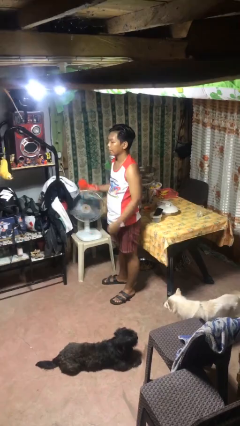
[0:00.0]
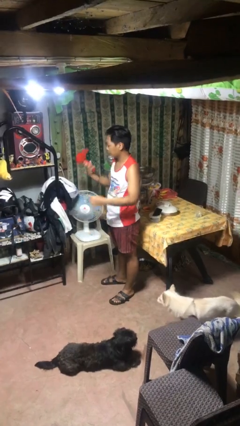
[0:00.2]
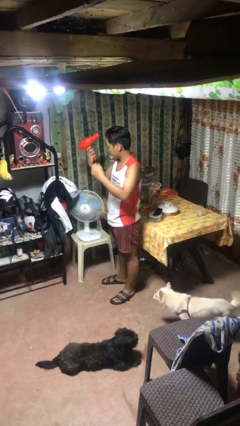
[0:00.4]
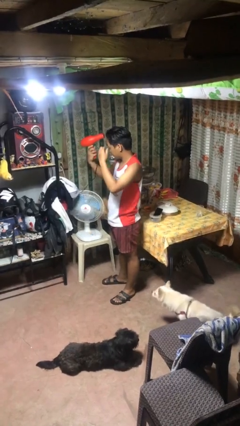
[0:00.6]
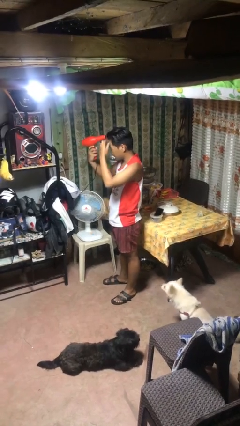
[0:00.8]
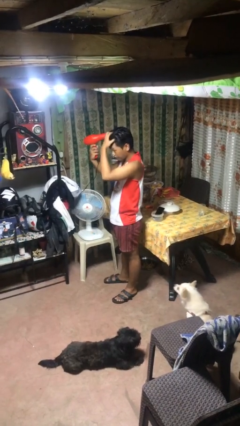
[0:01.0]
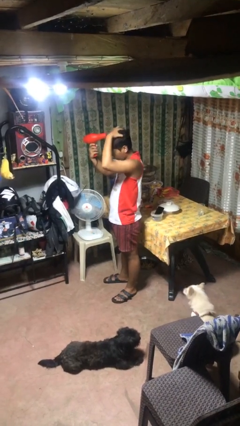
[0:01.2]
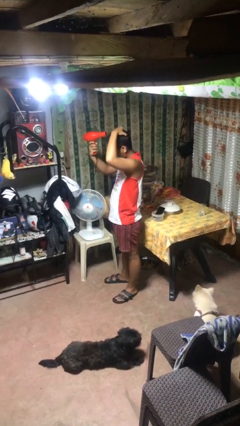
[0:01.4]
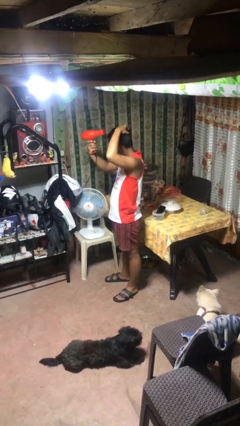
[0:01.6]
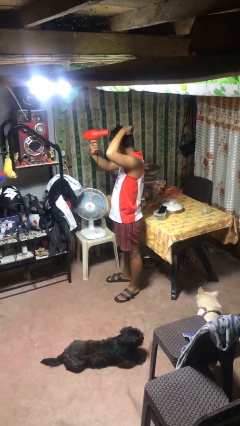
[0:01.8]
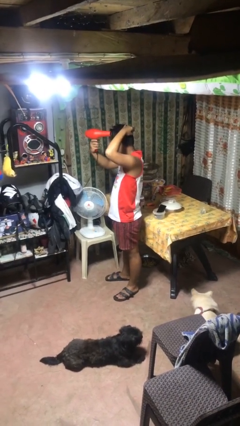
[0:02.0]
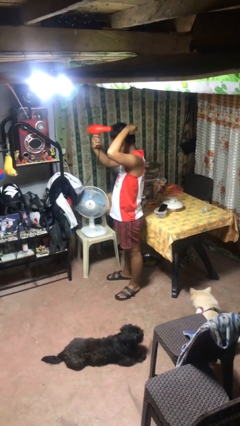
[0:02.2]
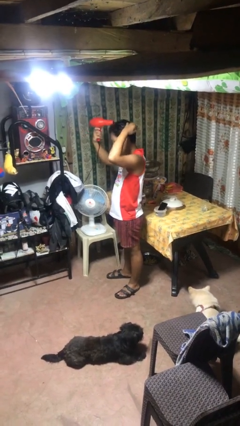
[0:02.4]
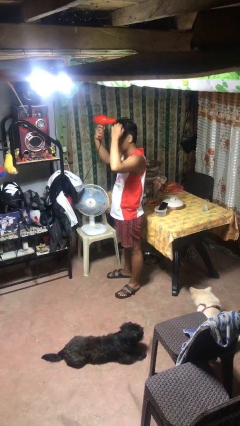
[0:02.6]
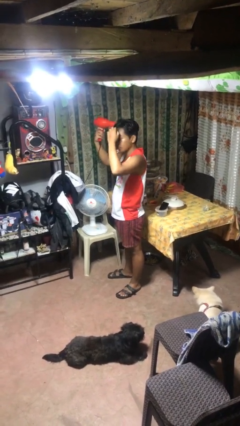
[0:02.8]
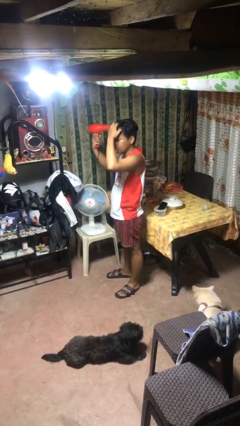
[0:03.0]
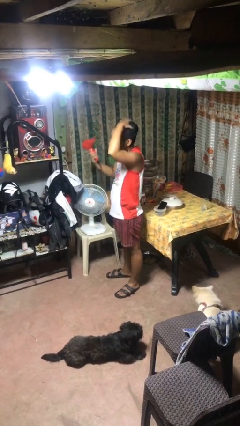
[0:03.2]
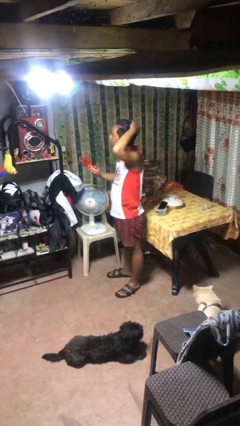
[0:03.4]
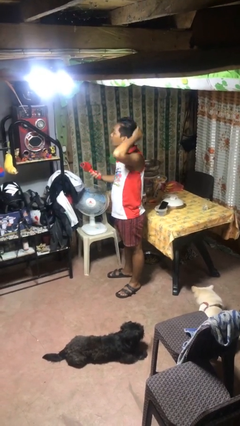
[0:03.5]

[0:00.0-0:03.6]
person dries hair with hairdryer

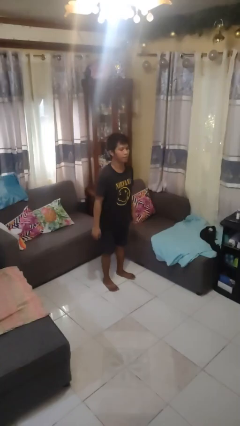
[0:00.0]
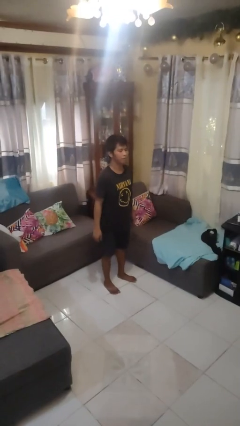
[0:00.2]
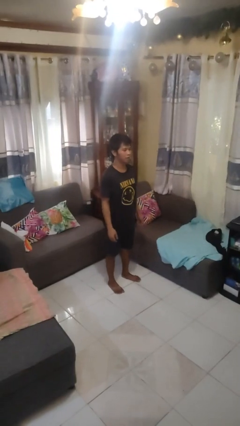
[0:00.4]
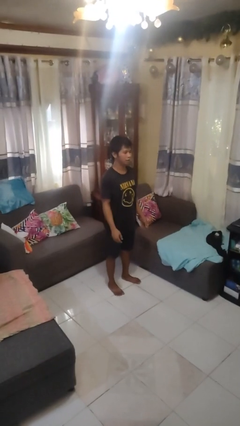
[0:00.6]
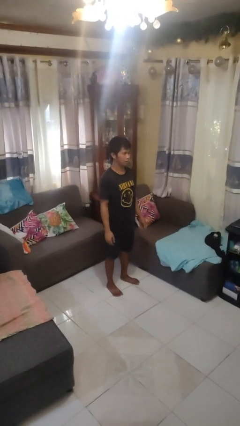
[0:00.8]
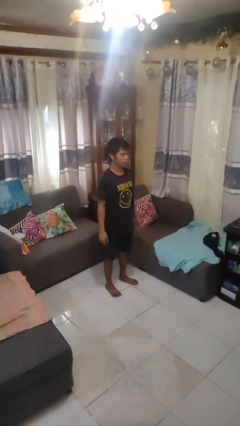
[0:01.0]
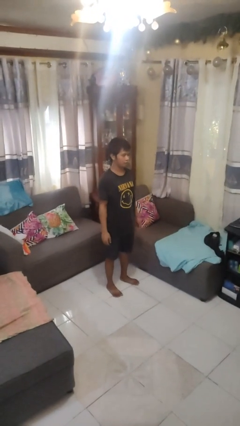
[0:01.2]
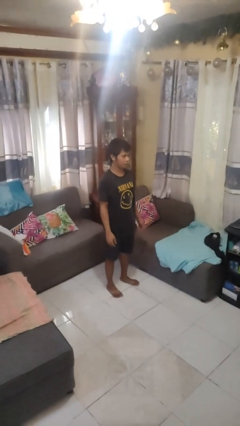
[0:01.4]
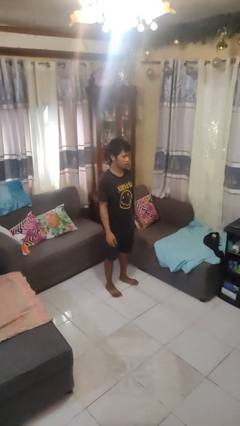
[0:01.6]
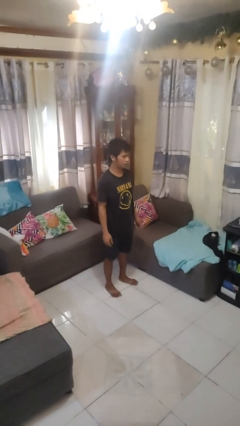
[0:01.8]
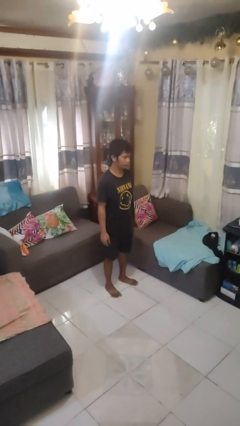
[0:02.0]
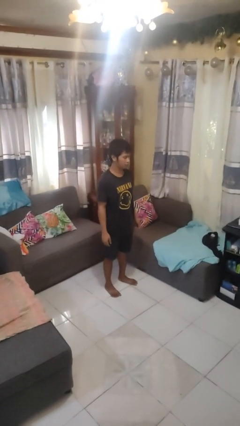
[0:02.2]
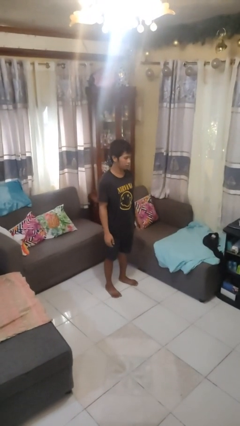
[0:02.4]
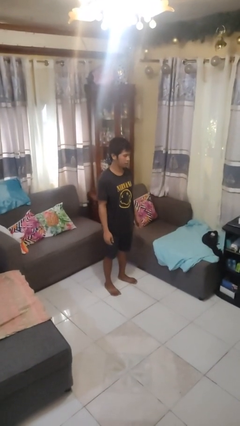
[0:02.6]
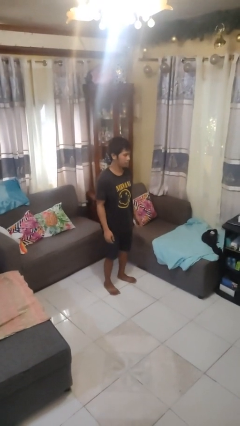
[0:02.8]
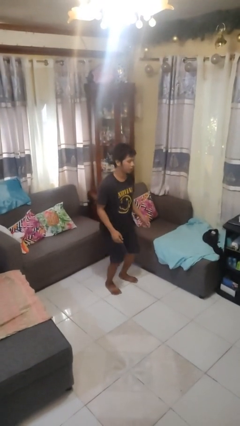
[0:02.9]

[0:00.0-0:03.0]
person stands up

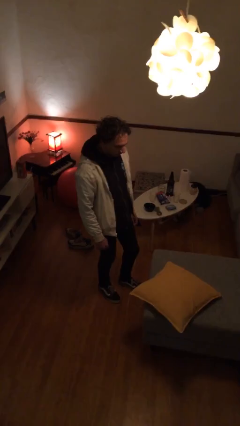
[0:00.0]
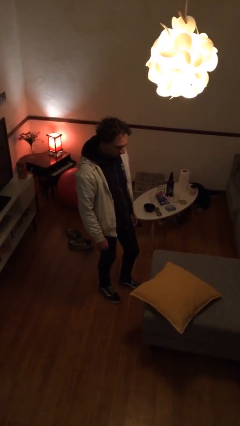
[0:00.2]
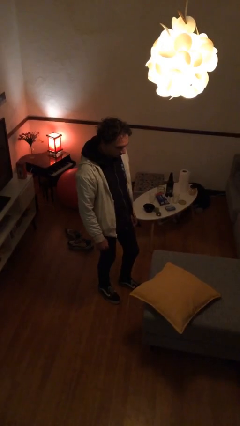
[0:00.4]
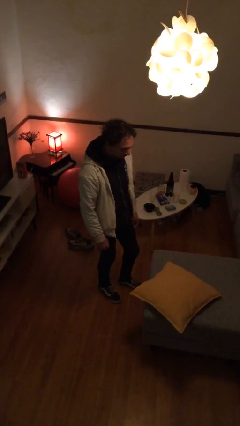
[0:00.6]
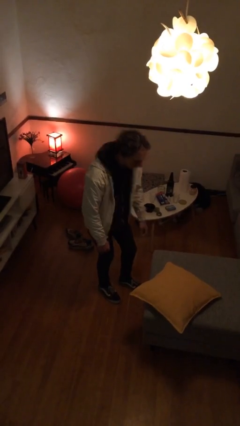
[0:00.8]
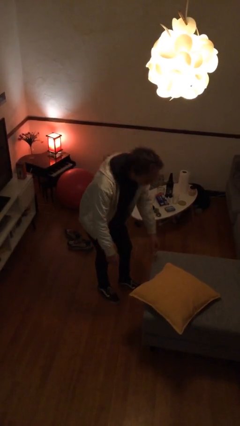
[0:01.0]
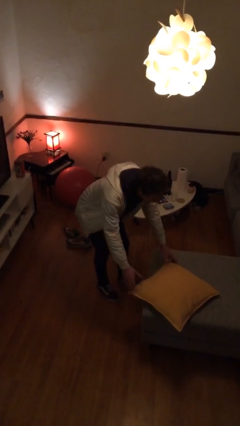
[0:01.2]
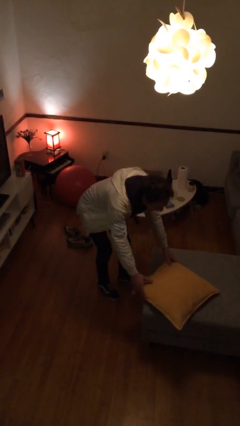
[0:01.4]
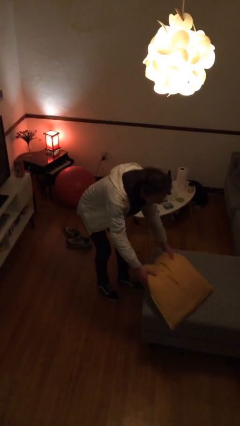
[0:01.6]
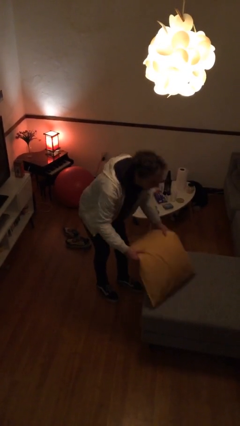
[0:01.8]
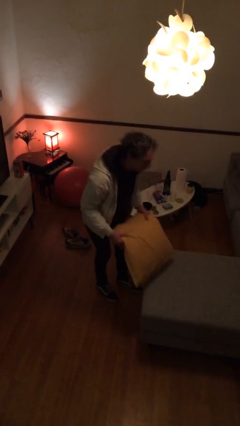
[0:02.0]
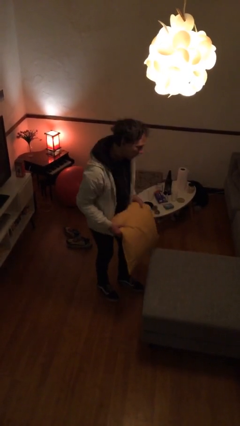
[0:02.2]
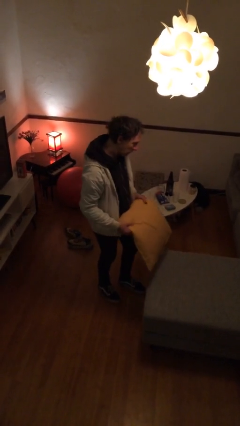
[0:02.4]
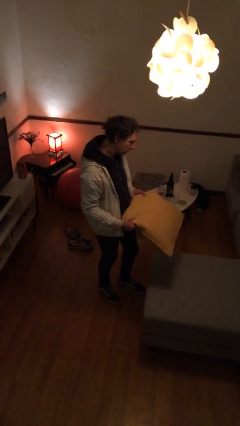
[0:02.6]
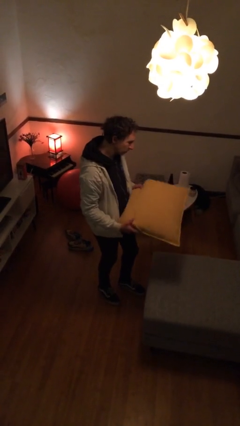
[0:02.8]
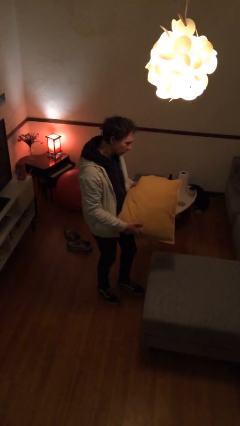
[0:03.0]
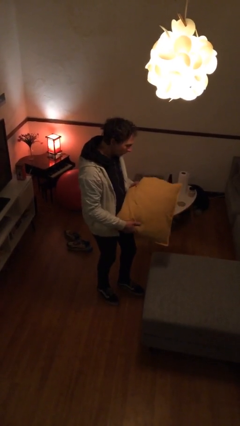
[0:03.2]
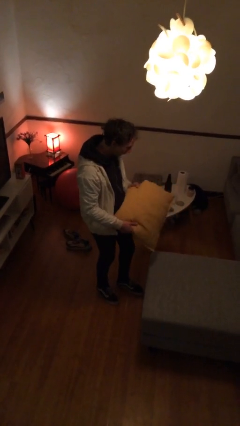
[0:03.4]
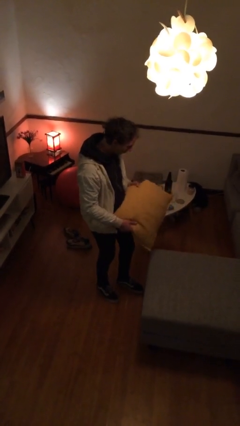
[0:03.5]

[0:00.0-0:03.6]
person picks up object from couch

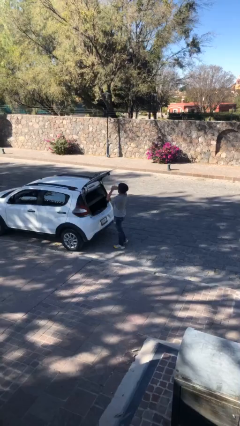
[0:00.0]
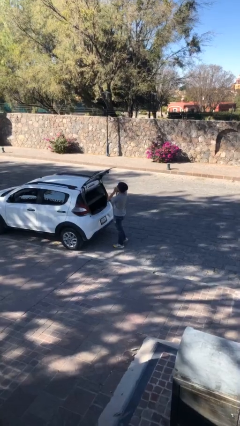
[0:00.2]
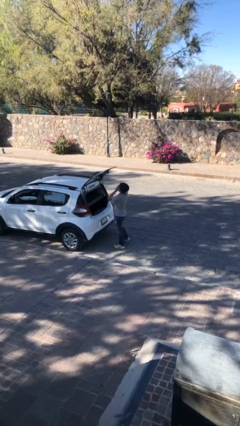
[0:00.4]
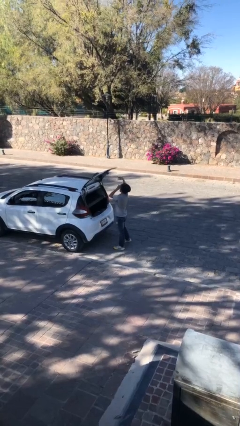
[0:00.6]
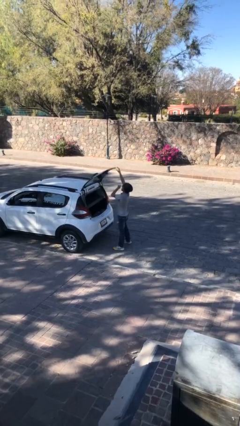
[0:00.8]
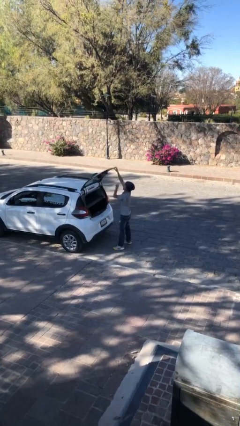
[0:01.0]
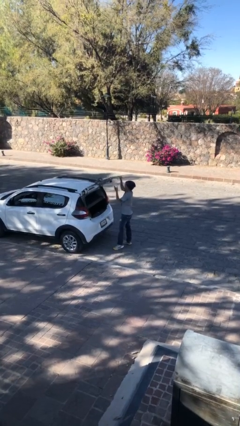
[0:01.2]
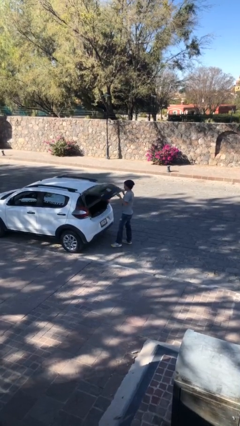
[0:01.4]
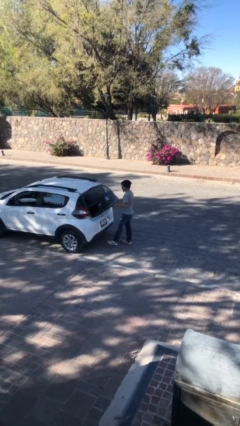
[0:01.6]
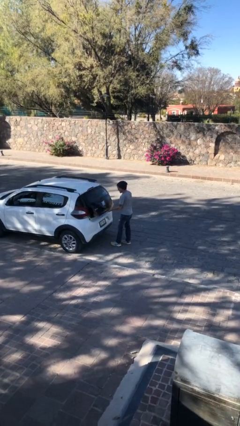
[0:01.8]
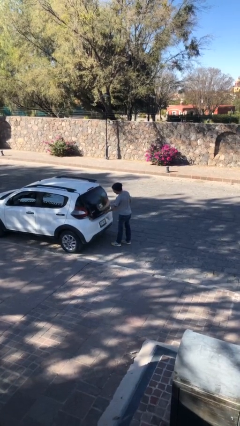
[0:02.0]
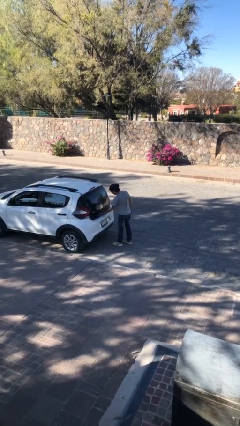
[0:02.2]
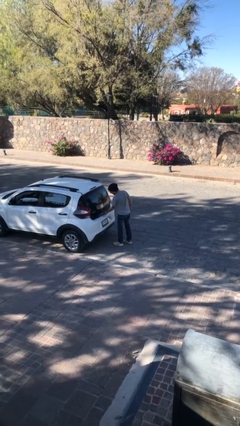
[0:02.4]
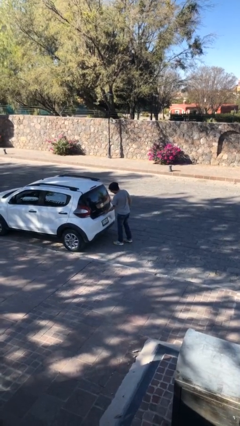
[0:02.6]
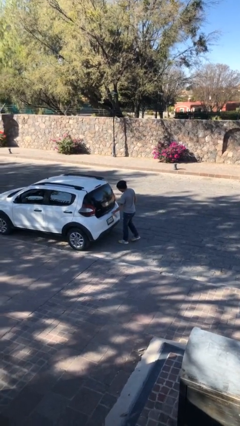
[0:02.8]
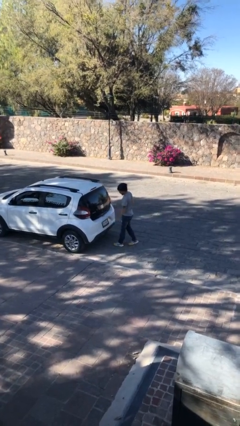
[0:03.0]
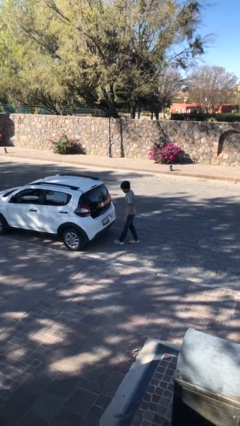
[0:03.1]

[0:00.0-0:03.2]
person closes car trunk

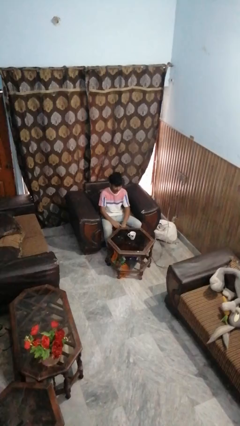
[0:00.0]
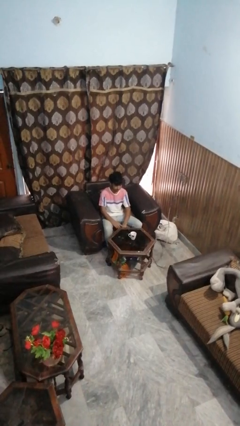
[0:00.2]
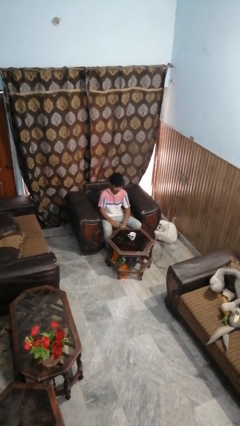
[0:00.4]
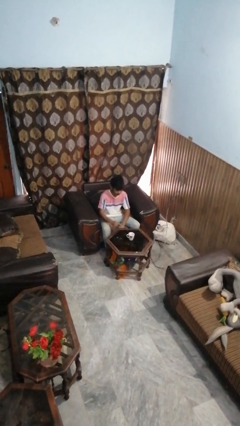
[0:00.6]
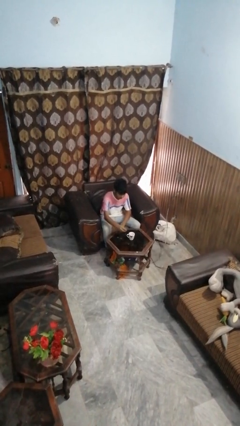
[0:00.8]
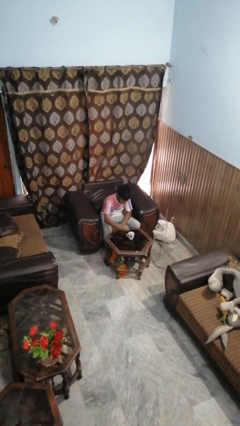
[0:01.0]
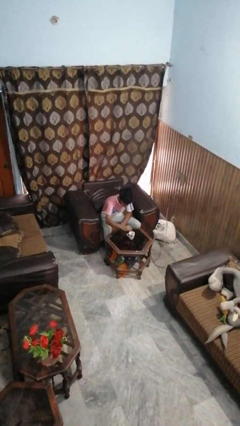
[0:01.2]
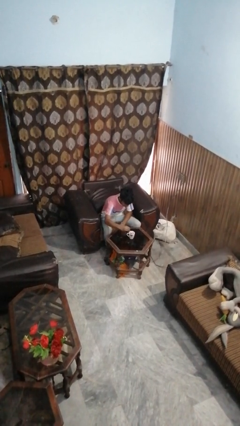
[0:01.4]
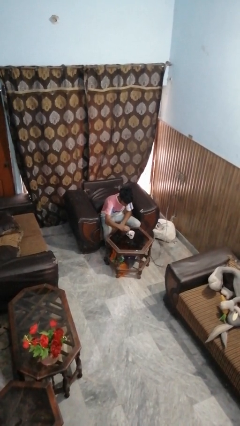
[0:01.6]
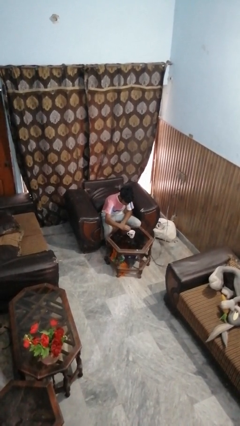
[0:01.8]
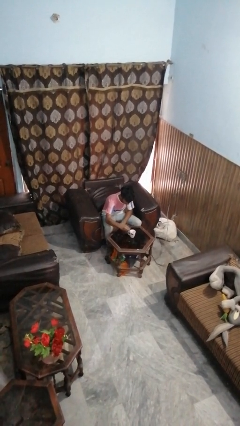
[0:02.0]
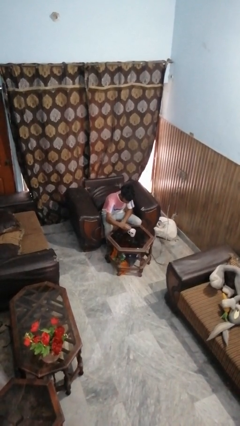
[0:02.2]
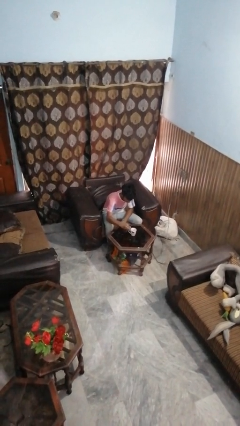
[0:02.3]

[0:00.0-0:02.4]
person stirs mug

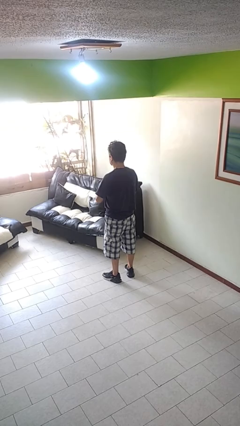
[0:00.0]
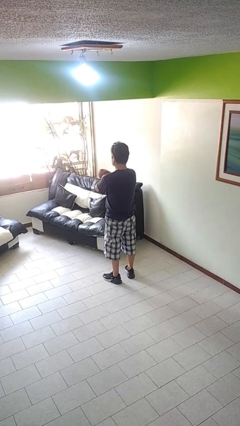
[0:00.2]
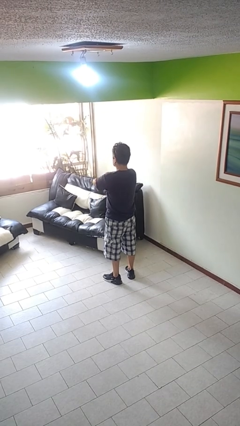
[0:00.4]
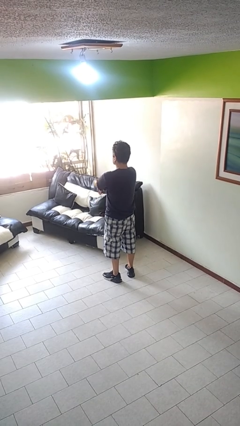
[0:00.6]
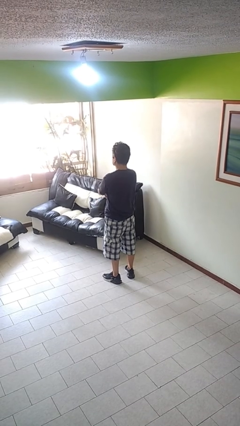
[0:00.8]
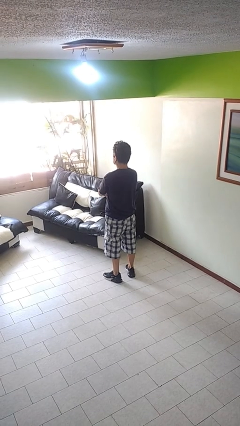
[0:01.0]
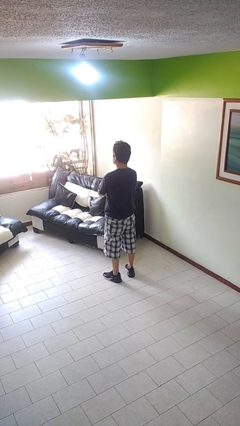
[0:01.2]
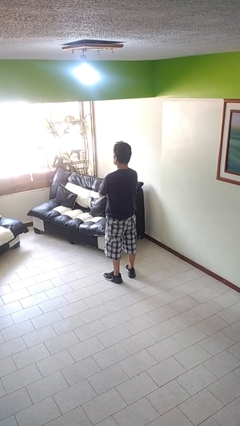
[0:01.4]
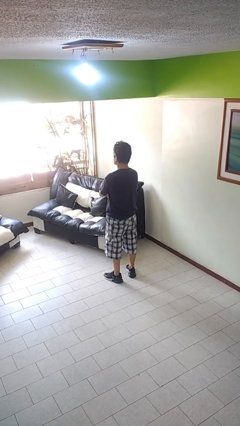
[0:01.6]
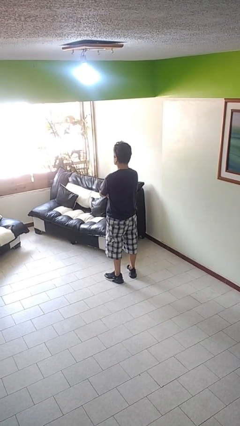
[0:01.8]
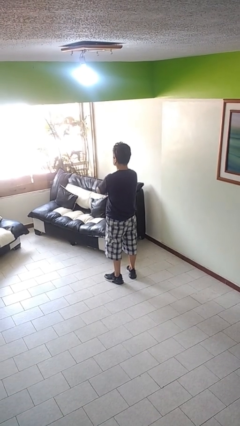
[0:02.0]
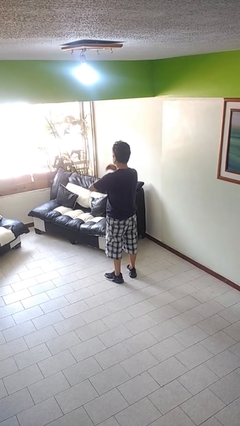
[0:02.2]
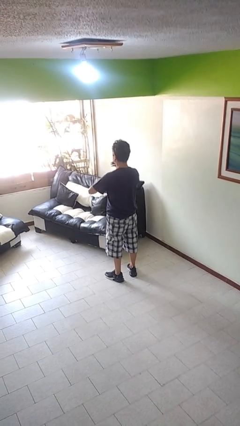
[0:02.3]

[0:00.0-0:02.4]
person crosses arms
